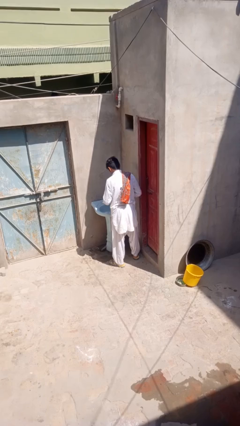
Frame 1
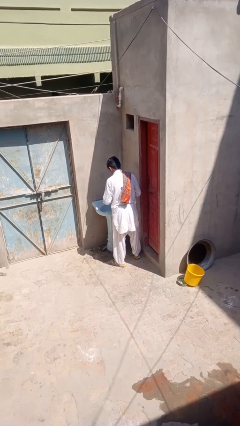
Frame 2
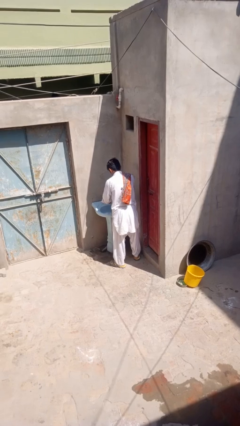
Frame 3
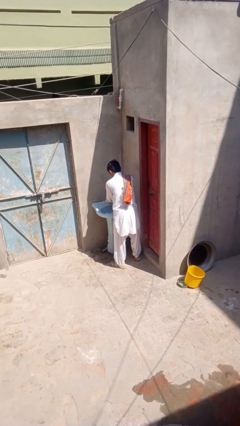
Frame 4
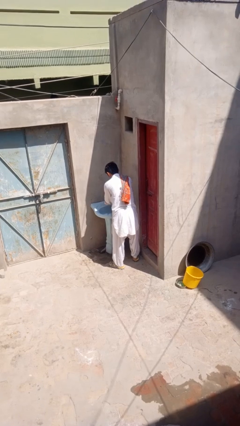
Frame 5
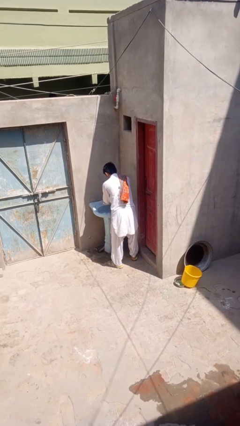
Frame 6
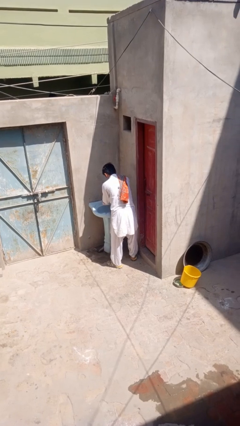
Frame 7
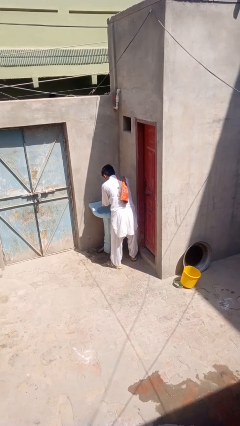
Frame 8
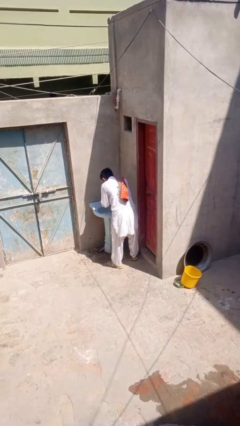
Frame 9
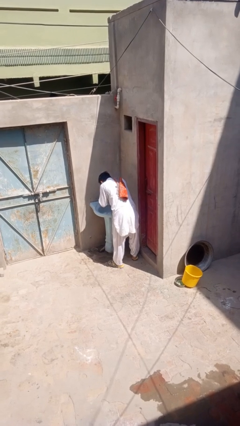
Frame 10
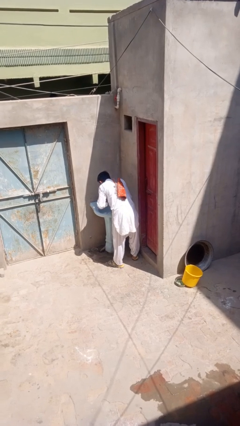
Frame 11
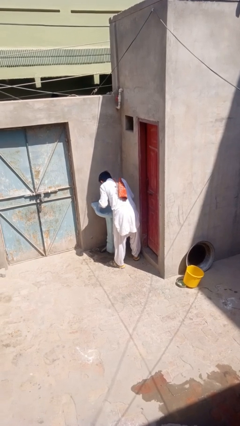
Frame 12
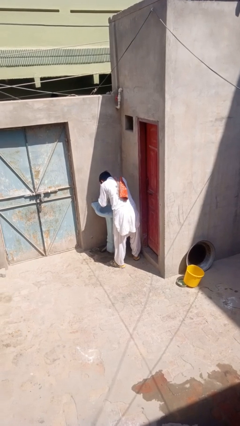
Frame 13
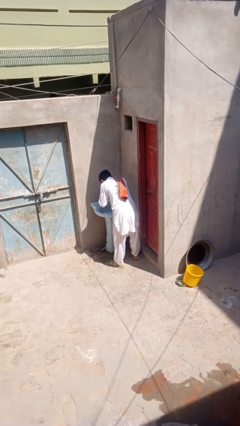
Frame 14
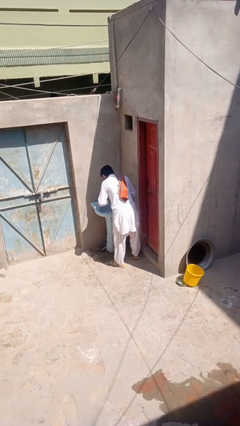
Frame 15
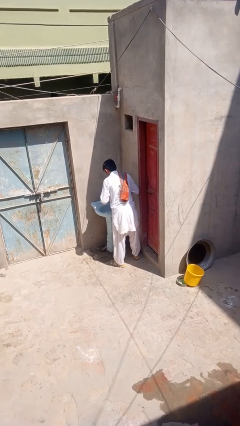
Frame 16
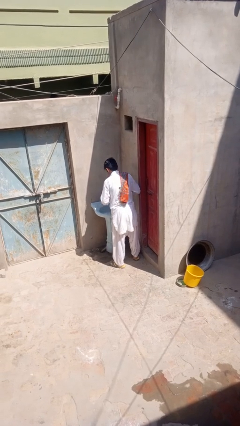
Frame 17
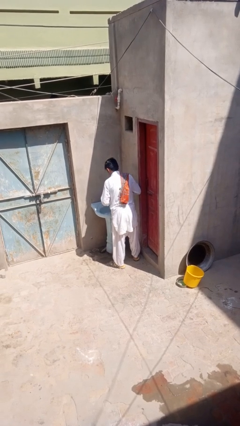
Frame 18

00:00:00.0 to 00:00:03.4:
person washes face

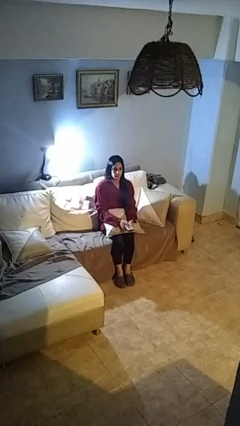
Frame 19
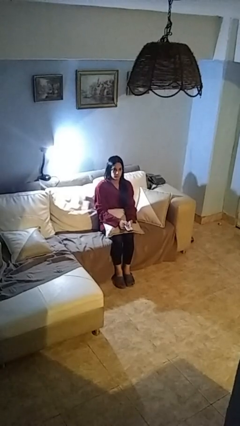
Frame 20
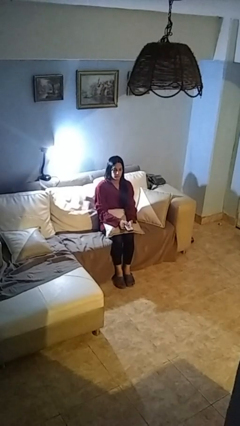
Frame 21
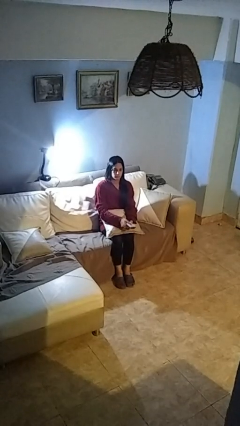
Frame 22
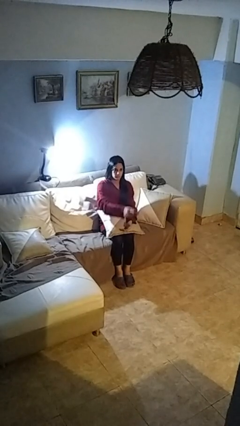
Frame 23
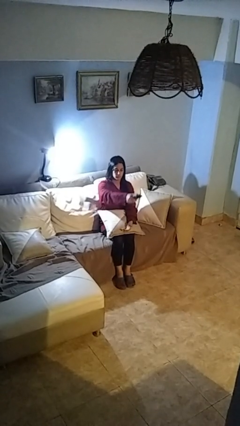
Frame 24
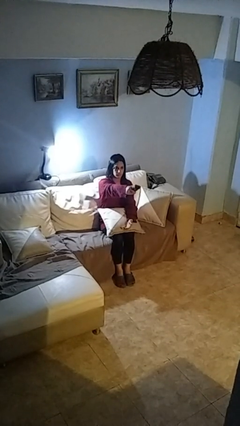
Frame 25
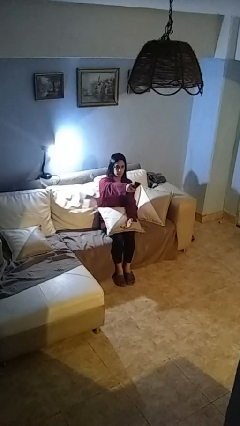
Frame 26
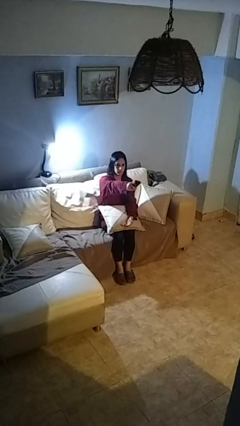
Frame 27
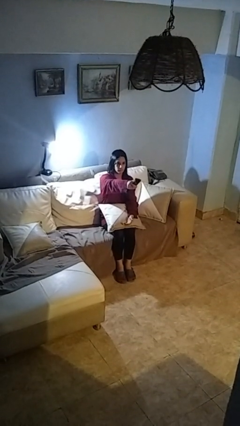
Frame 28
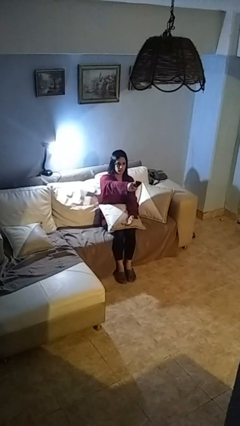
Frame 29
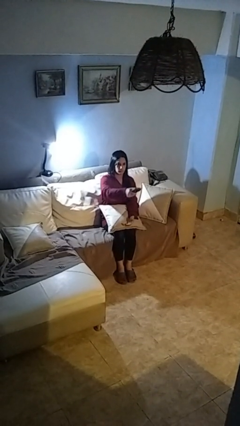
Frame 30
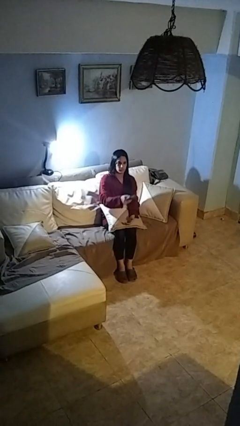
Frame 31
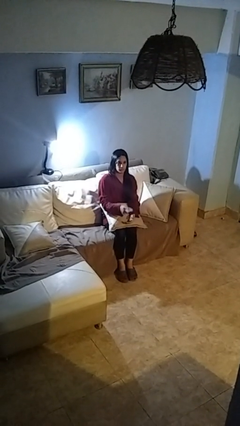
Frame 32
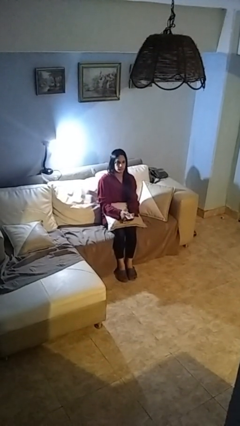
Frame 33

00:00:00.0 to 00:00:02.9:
person uses television remote

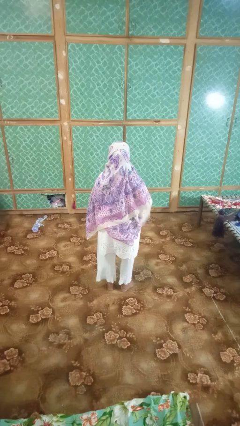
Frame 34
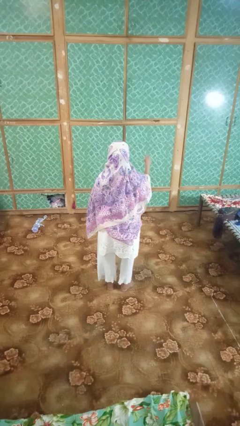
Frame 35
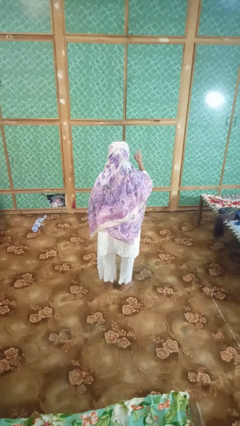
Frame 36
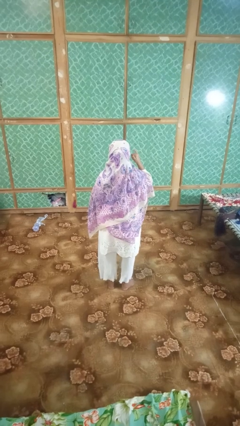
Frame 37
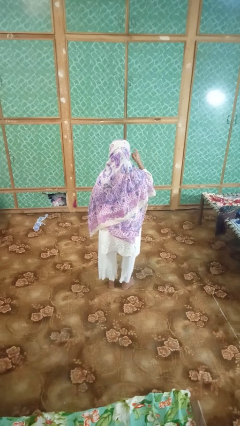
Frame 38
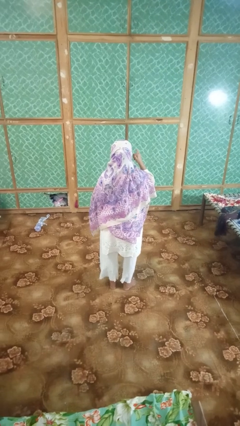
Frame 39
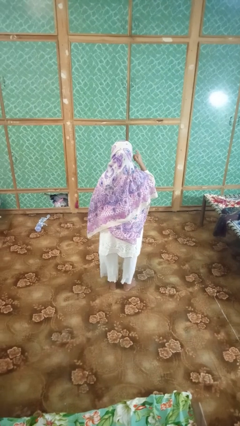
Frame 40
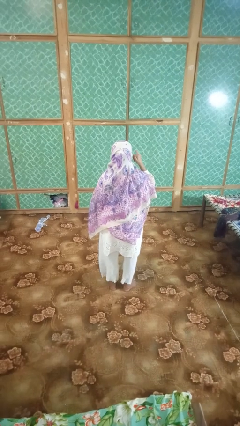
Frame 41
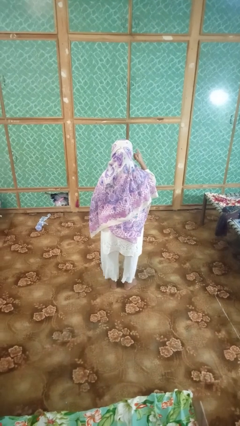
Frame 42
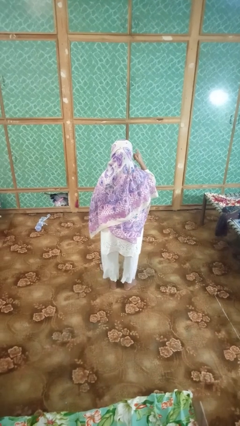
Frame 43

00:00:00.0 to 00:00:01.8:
person gestures call me

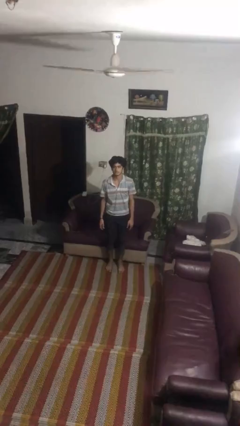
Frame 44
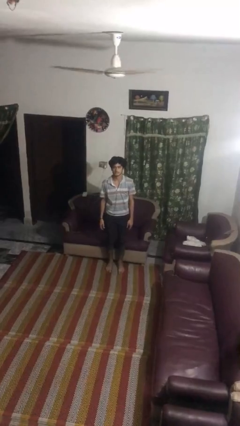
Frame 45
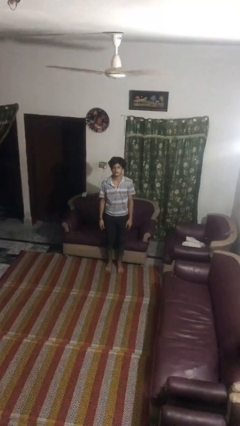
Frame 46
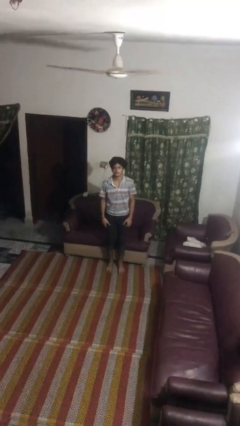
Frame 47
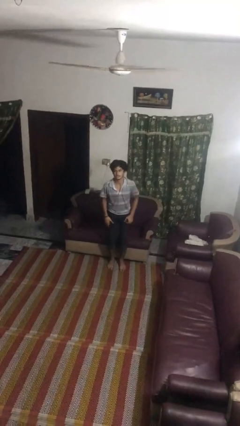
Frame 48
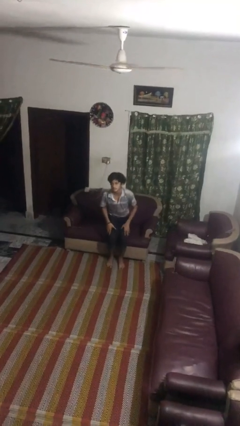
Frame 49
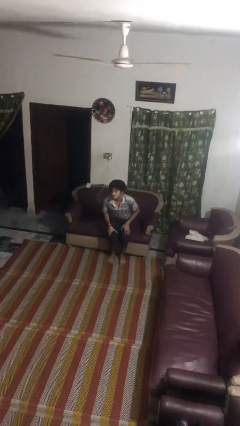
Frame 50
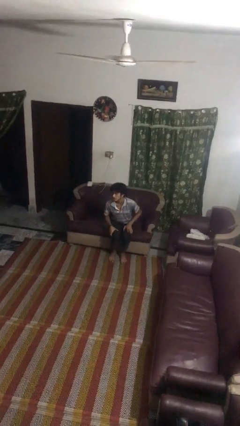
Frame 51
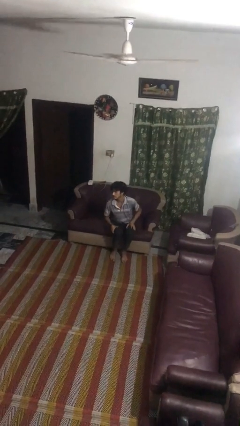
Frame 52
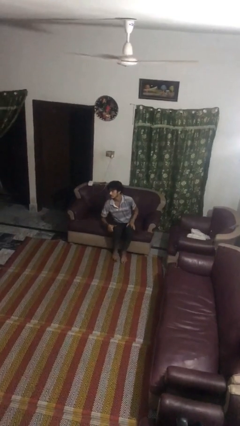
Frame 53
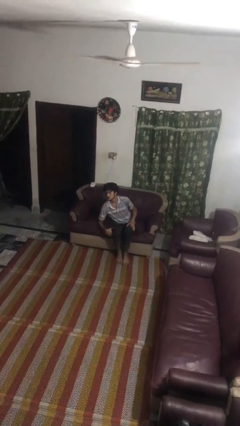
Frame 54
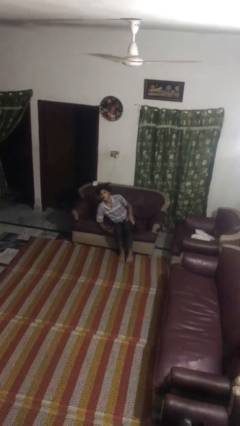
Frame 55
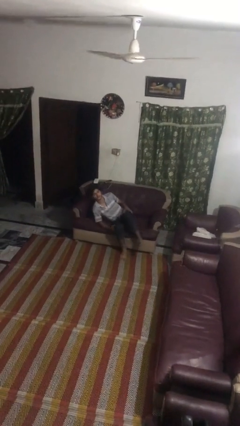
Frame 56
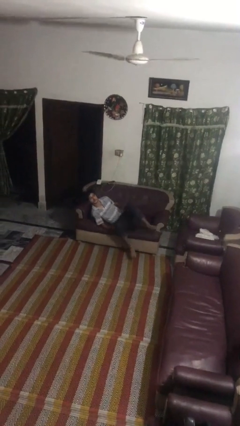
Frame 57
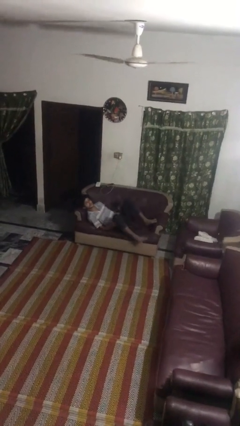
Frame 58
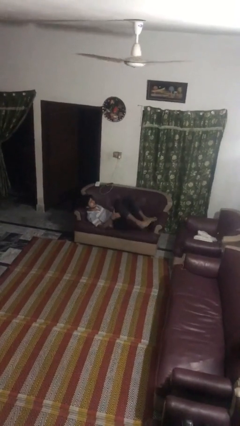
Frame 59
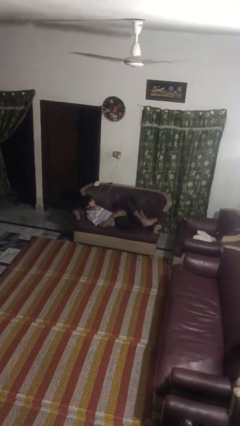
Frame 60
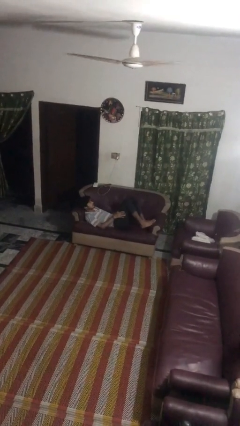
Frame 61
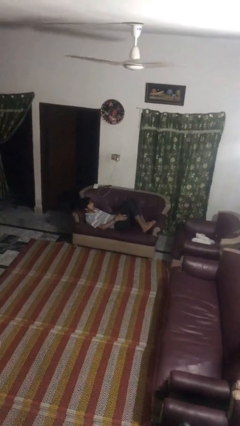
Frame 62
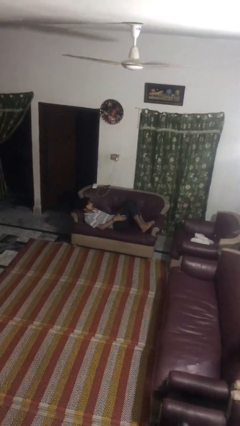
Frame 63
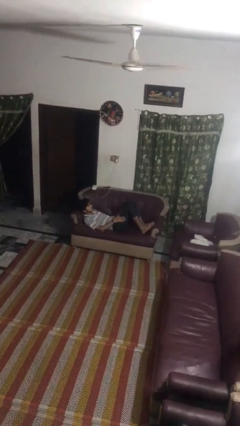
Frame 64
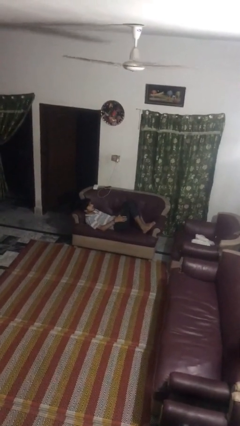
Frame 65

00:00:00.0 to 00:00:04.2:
person lies down on couch

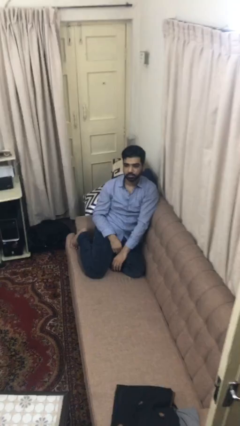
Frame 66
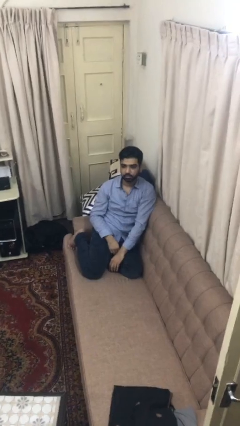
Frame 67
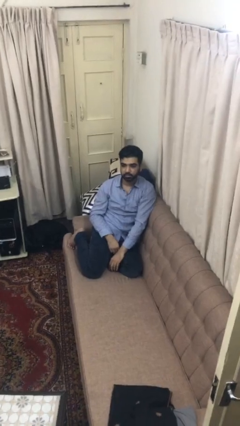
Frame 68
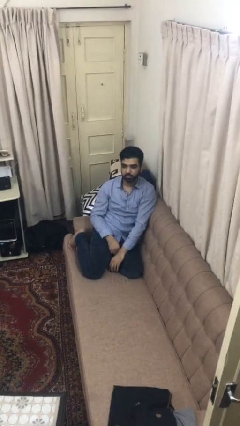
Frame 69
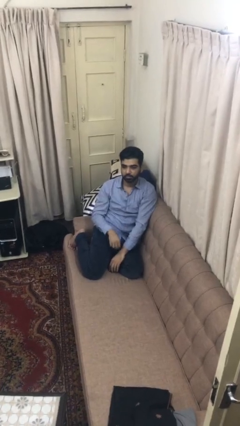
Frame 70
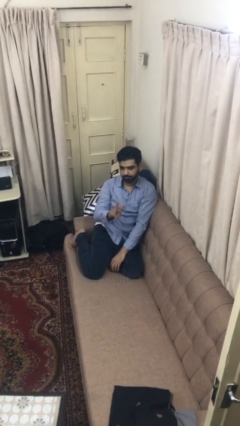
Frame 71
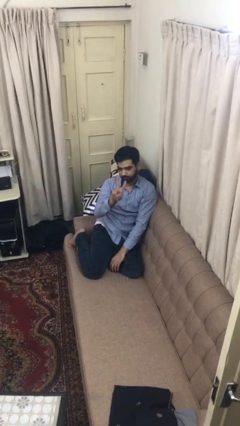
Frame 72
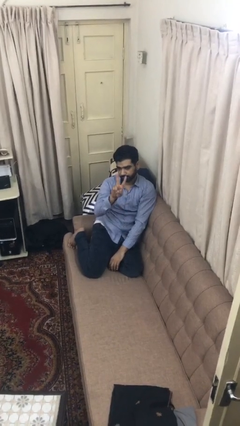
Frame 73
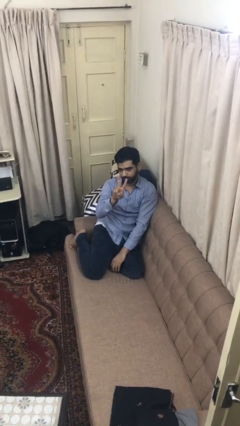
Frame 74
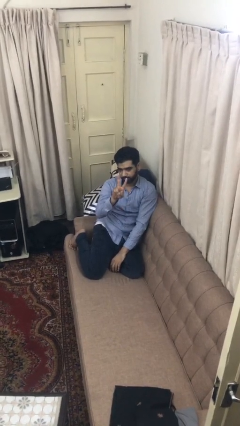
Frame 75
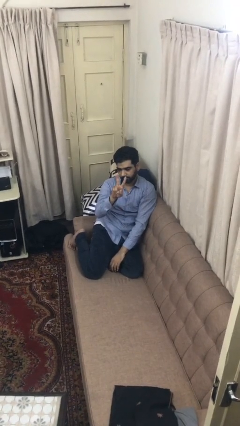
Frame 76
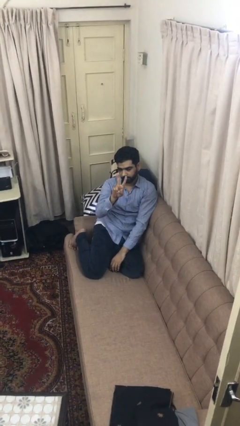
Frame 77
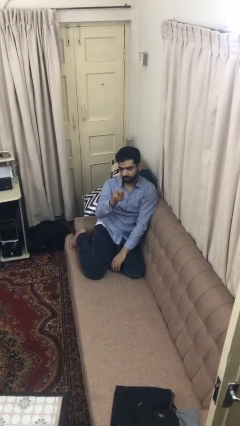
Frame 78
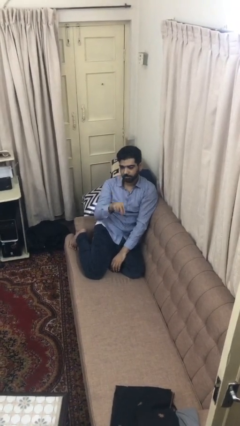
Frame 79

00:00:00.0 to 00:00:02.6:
person gestures peace

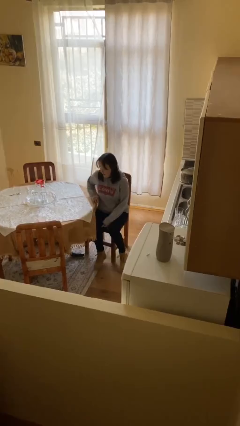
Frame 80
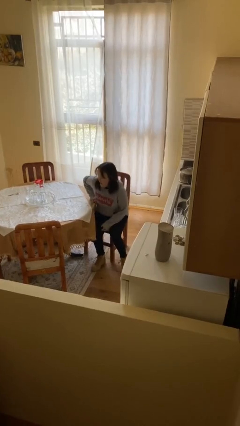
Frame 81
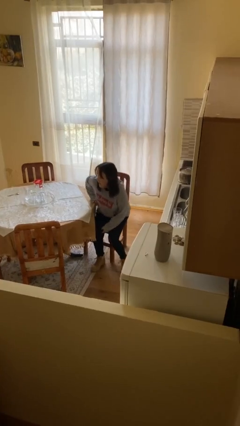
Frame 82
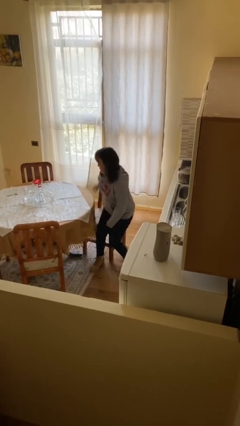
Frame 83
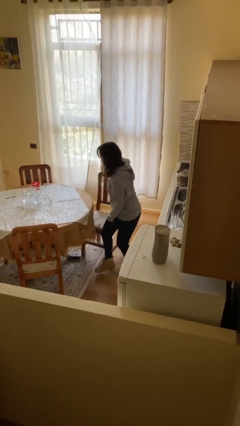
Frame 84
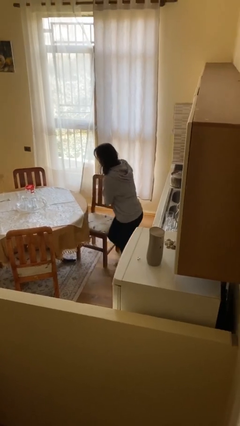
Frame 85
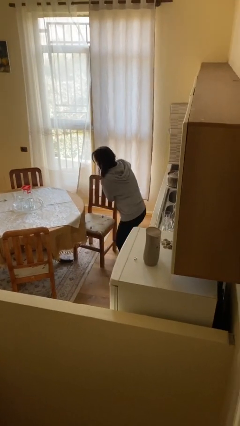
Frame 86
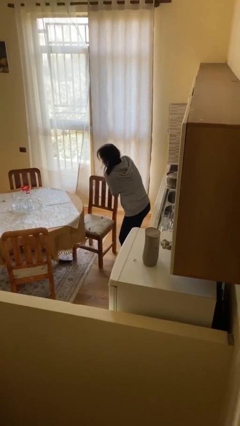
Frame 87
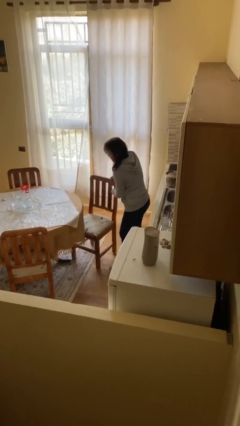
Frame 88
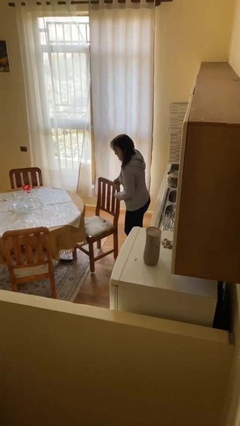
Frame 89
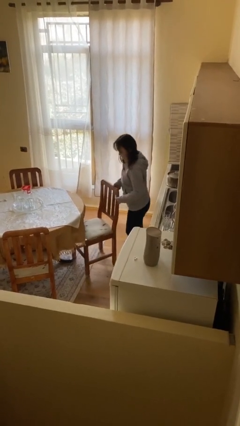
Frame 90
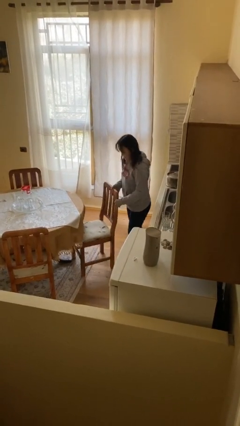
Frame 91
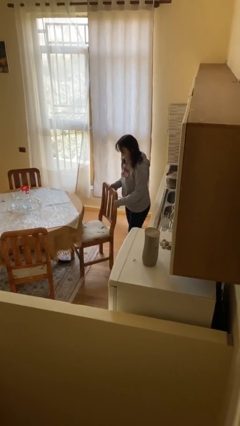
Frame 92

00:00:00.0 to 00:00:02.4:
person stands up

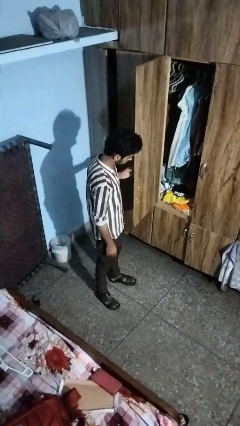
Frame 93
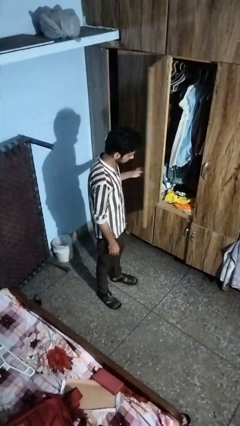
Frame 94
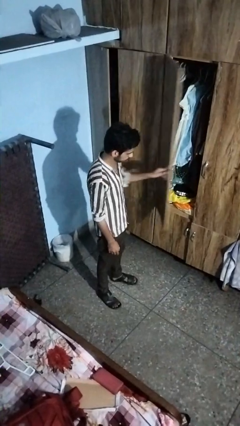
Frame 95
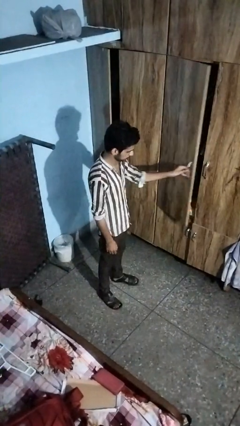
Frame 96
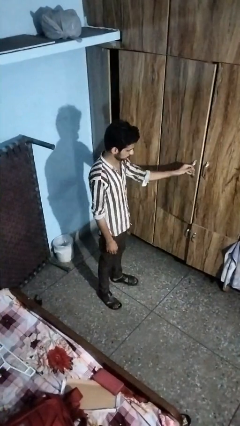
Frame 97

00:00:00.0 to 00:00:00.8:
person closes closet door
